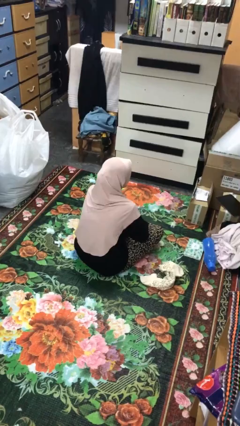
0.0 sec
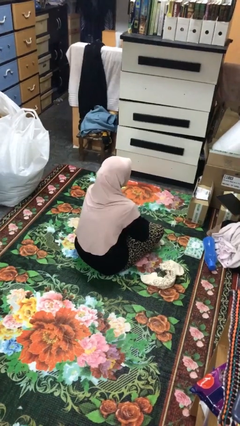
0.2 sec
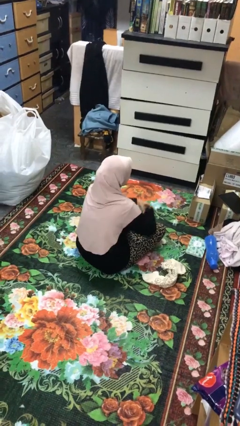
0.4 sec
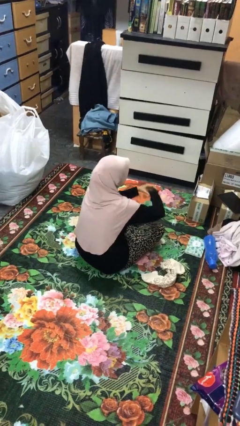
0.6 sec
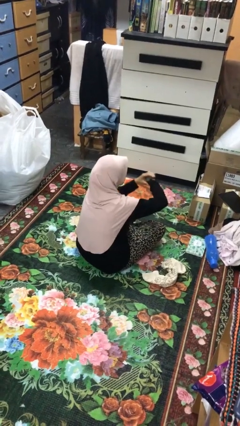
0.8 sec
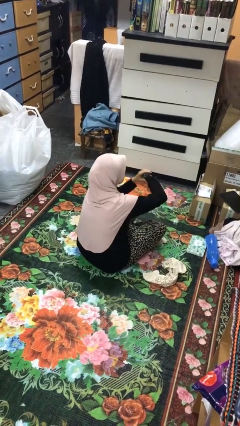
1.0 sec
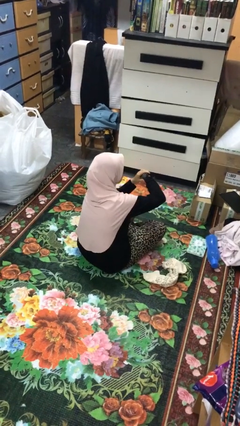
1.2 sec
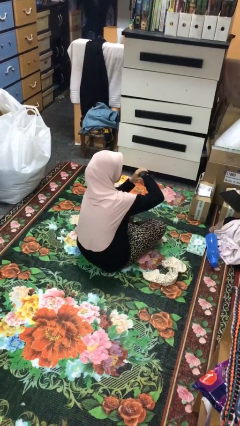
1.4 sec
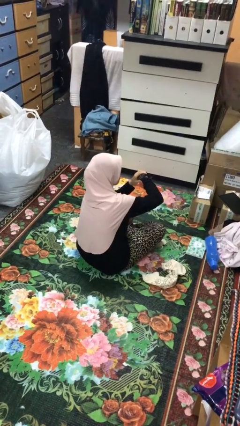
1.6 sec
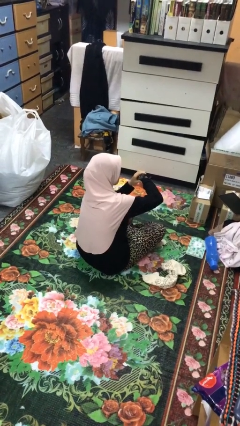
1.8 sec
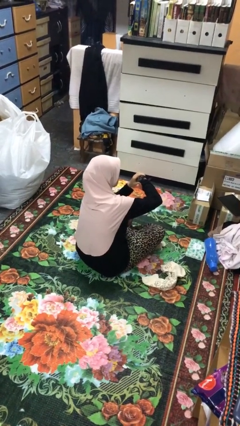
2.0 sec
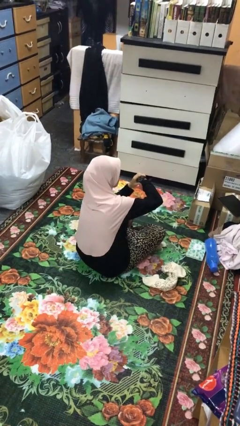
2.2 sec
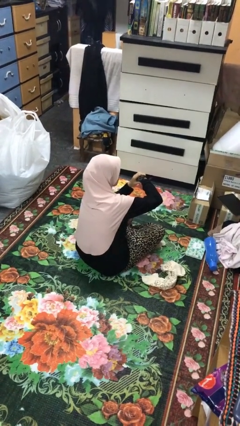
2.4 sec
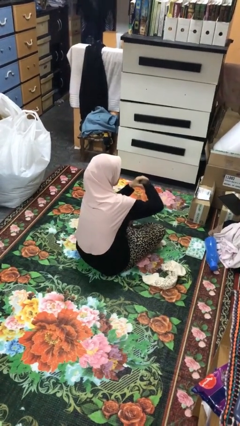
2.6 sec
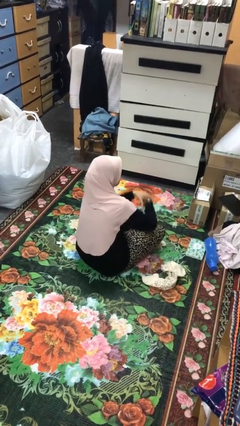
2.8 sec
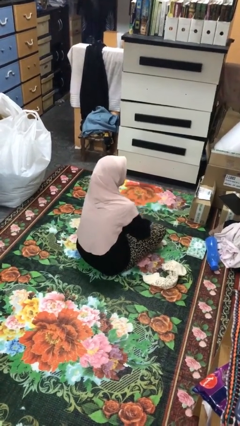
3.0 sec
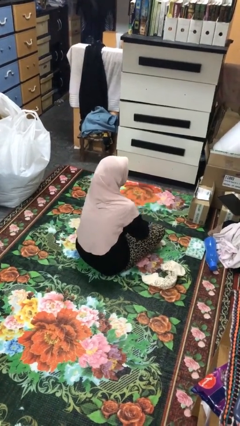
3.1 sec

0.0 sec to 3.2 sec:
person looks at wristwatch

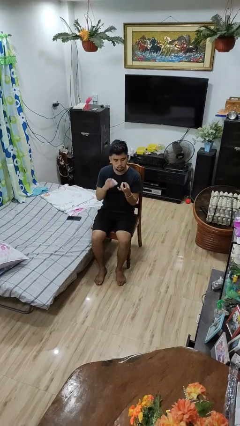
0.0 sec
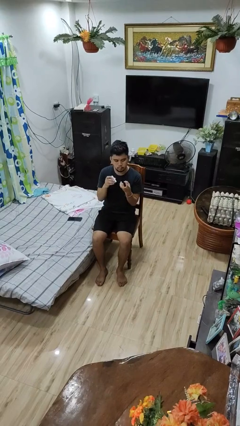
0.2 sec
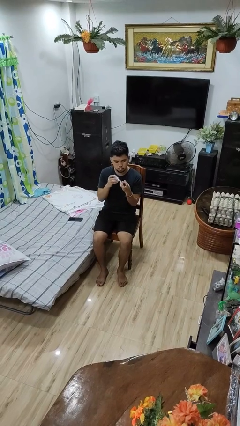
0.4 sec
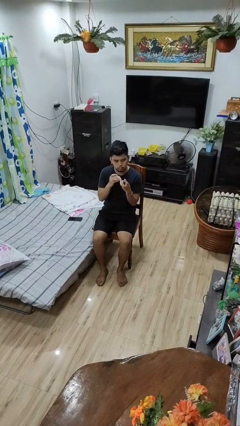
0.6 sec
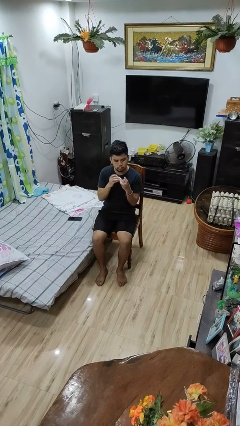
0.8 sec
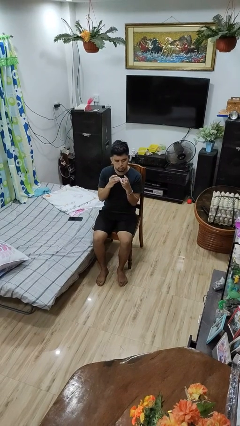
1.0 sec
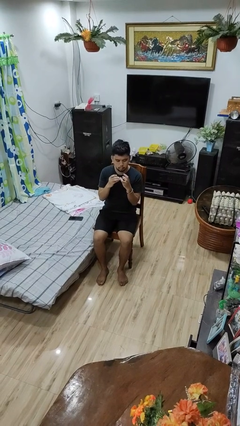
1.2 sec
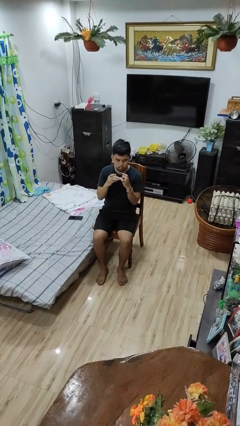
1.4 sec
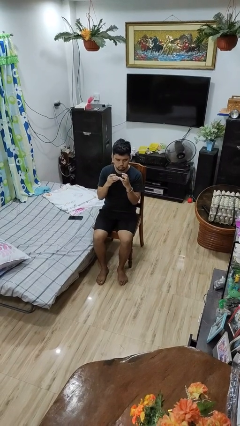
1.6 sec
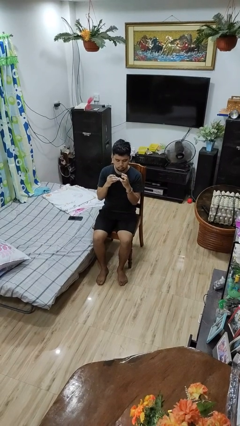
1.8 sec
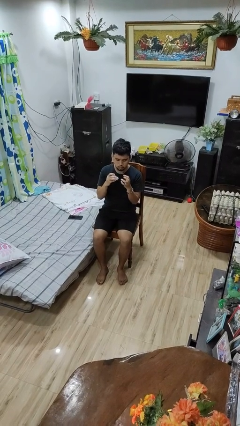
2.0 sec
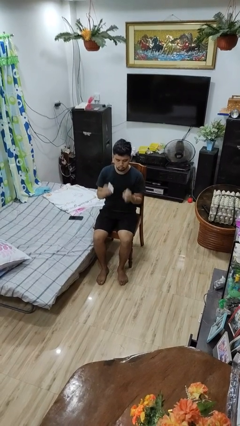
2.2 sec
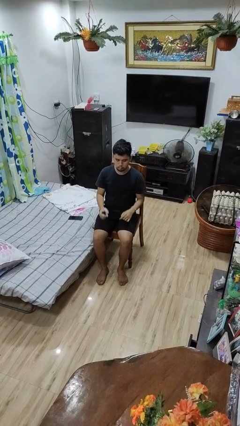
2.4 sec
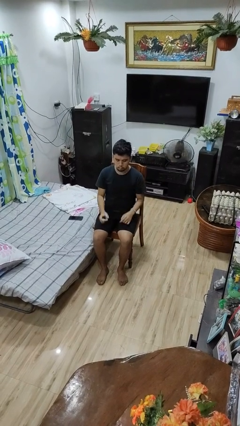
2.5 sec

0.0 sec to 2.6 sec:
person clips fingernails

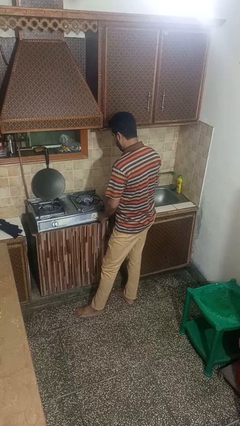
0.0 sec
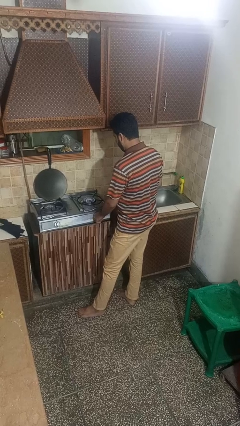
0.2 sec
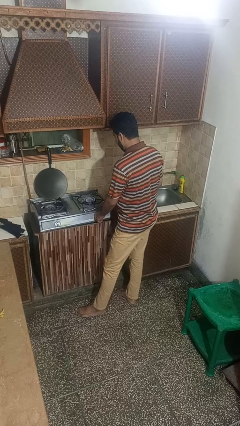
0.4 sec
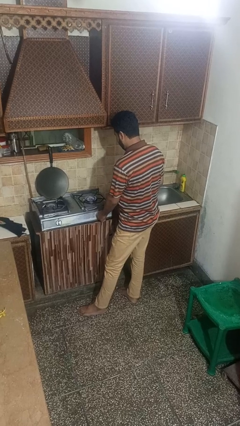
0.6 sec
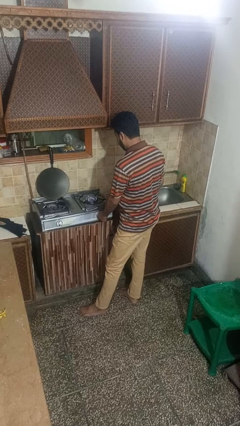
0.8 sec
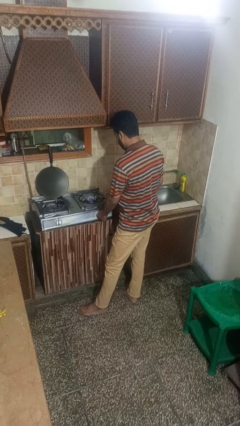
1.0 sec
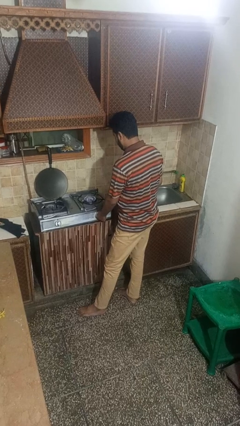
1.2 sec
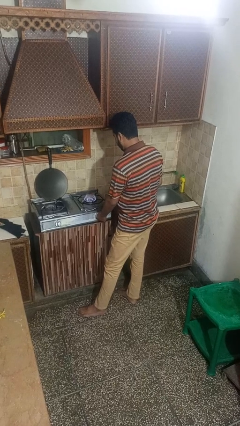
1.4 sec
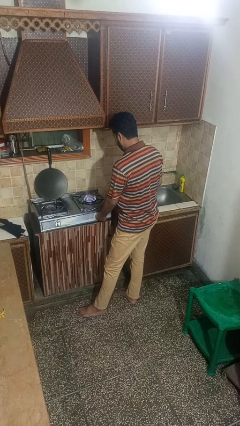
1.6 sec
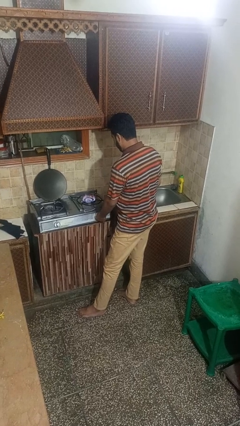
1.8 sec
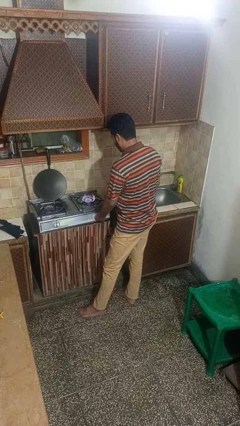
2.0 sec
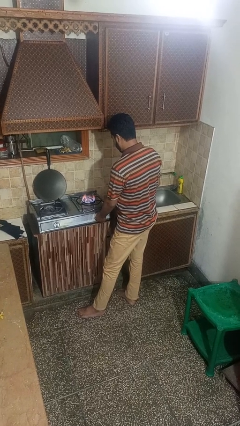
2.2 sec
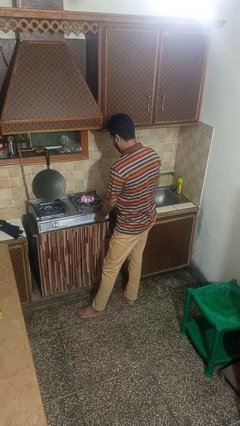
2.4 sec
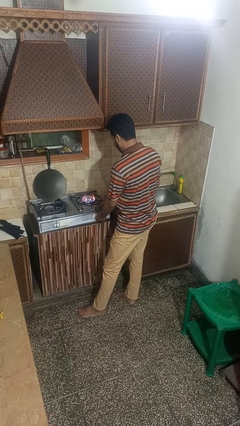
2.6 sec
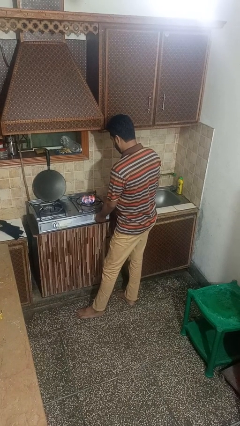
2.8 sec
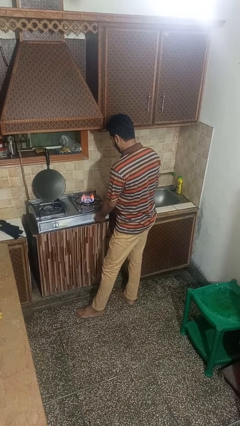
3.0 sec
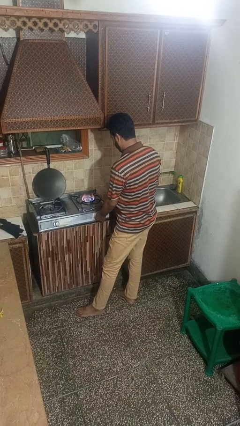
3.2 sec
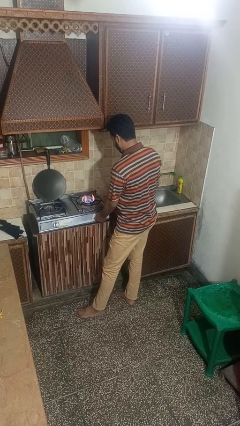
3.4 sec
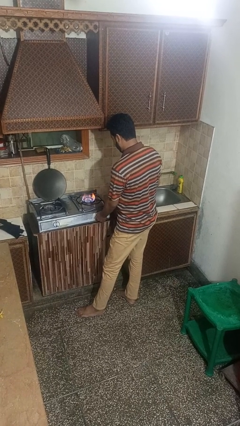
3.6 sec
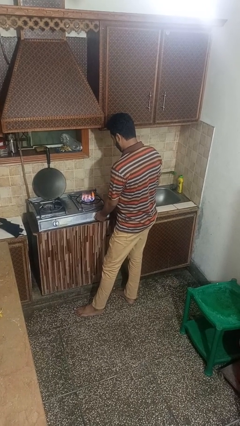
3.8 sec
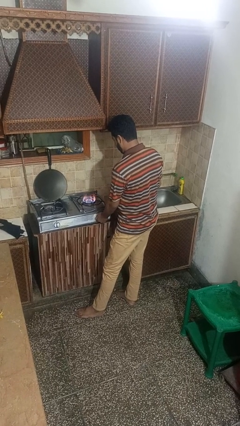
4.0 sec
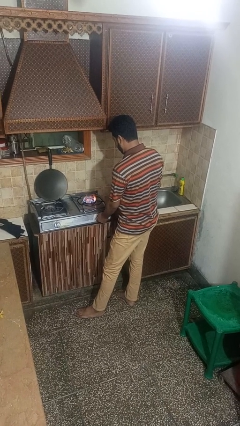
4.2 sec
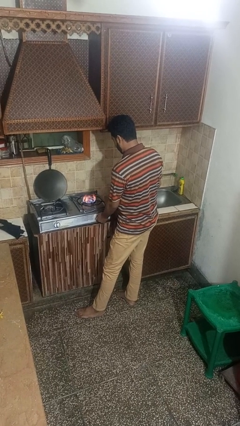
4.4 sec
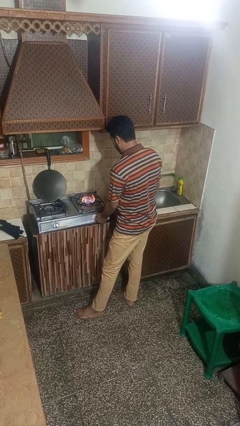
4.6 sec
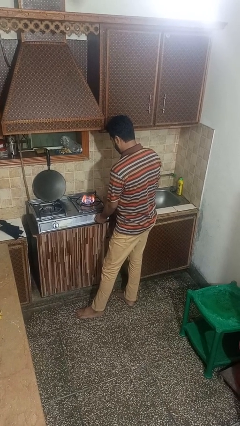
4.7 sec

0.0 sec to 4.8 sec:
person turns on stovetop

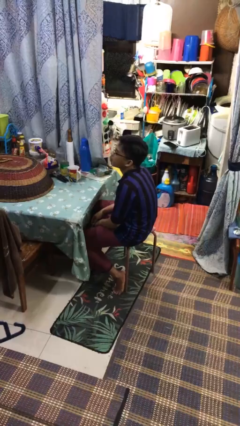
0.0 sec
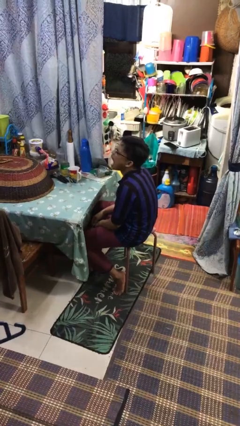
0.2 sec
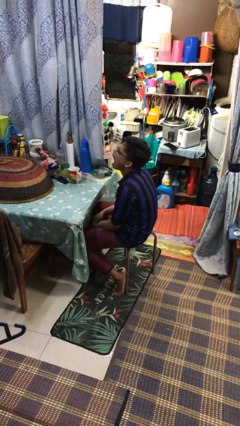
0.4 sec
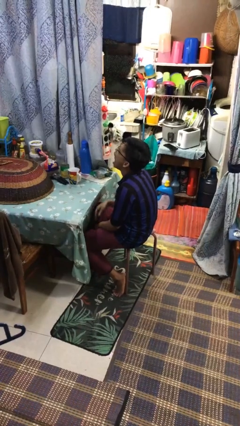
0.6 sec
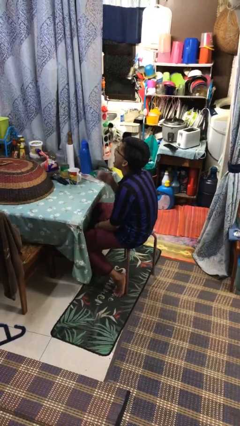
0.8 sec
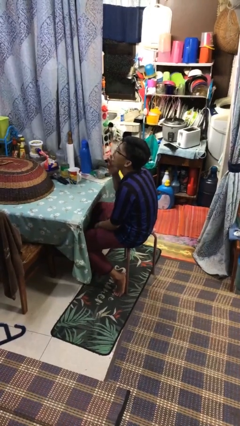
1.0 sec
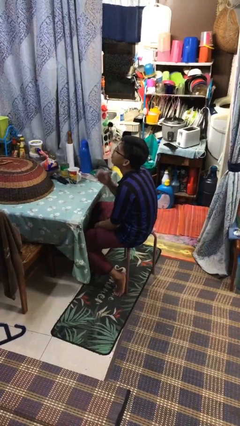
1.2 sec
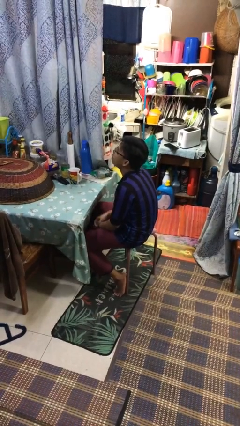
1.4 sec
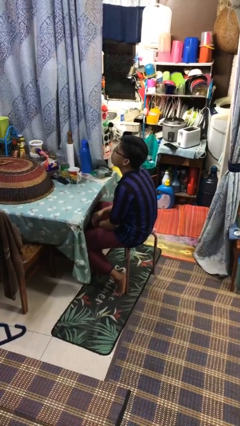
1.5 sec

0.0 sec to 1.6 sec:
person yawns

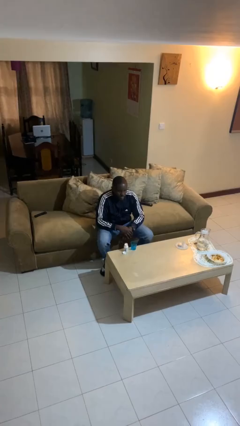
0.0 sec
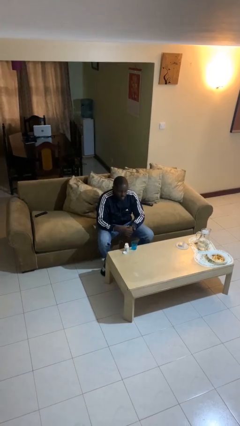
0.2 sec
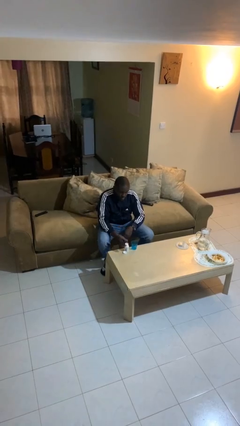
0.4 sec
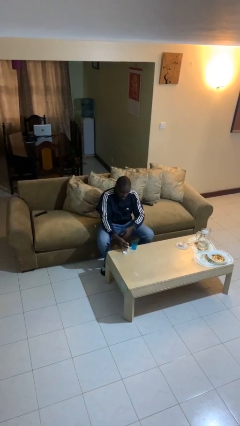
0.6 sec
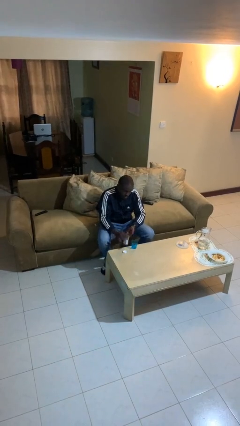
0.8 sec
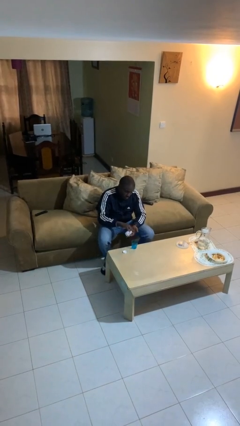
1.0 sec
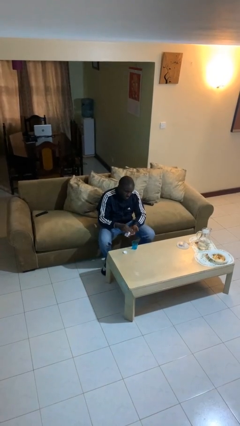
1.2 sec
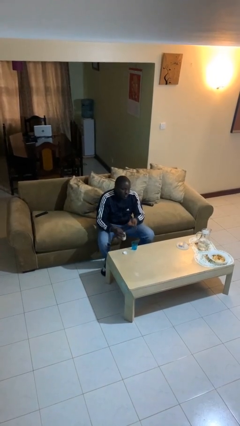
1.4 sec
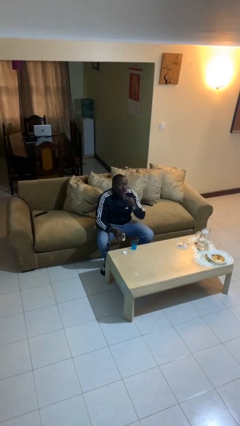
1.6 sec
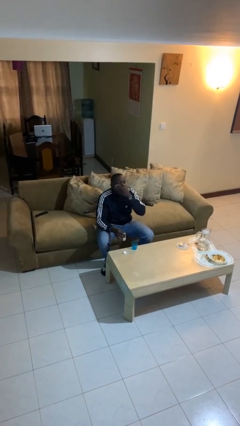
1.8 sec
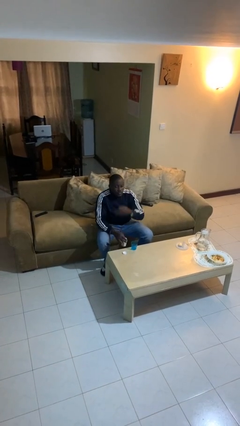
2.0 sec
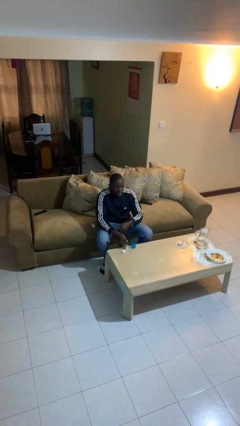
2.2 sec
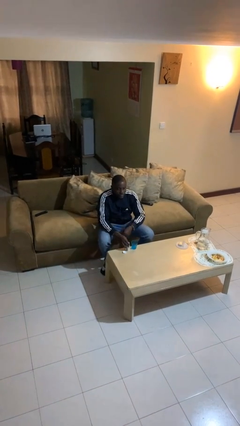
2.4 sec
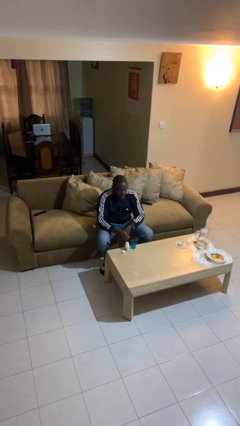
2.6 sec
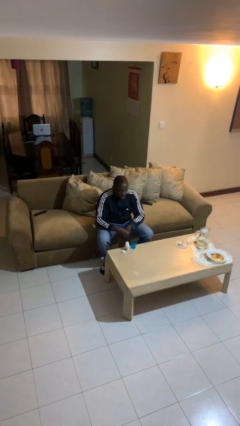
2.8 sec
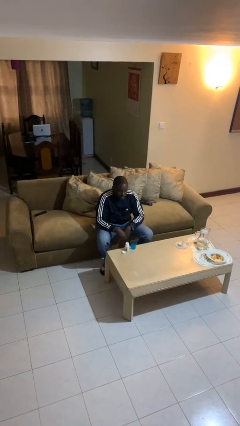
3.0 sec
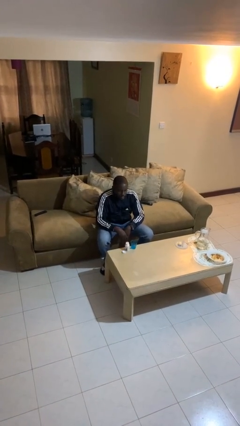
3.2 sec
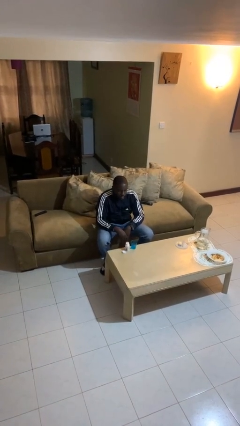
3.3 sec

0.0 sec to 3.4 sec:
person takes medicine pills

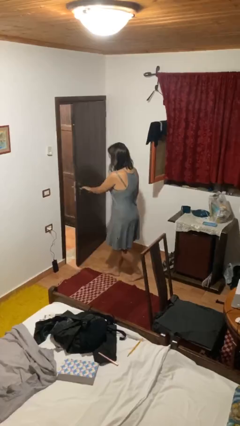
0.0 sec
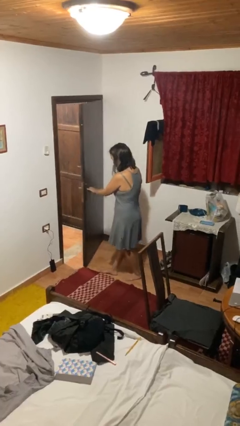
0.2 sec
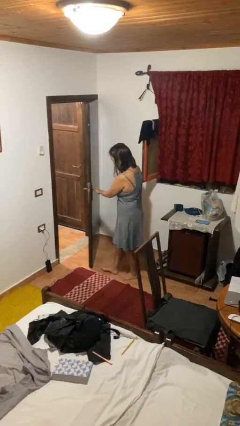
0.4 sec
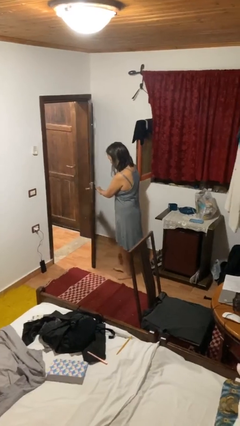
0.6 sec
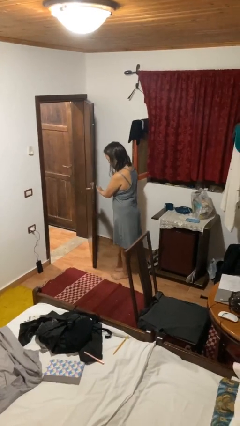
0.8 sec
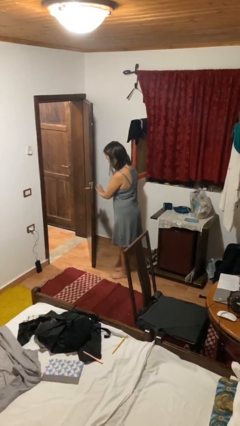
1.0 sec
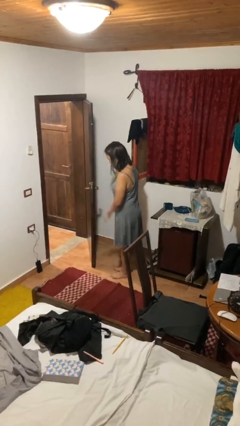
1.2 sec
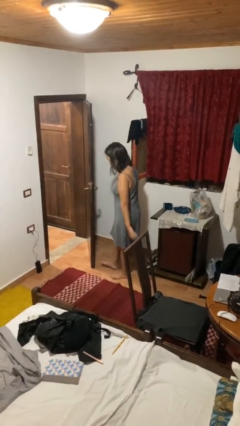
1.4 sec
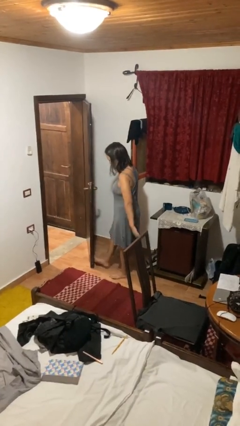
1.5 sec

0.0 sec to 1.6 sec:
person opens facility door

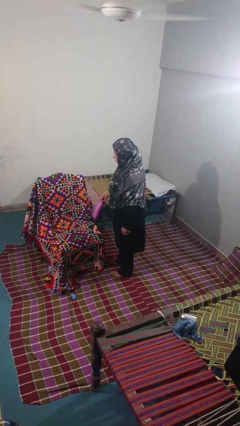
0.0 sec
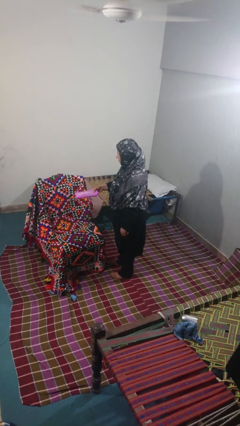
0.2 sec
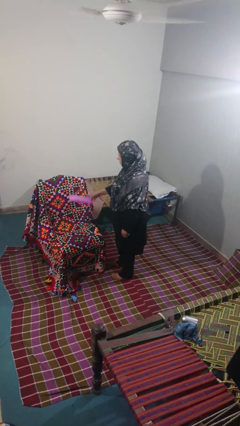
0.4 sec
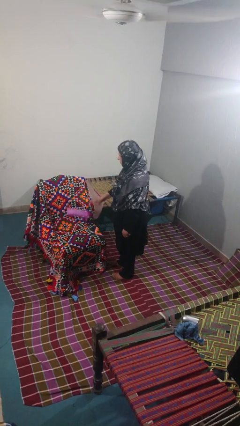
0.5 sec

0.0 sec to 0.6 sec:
person puts down object on couch
